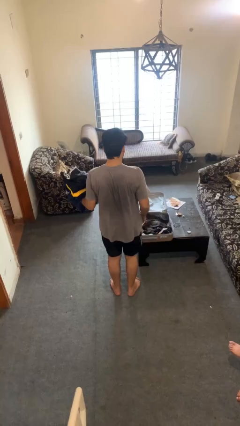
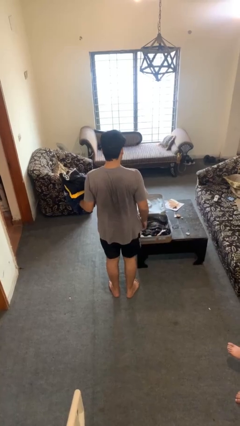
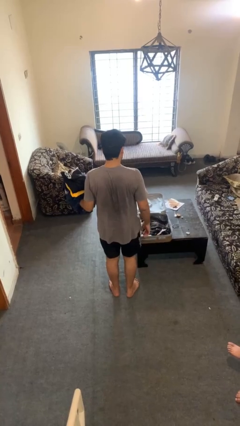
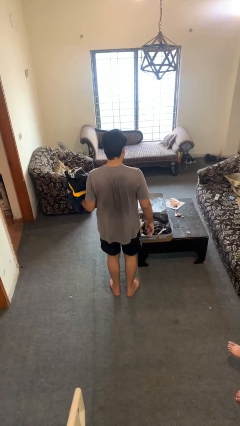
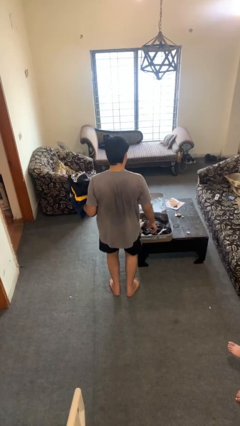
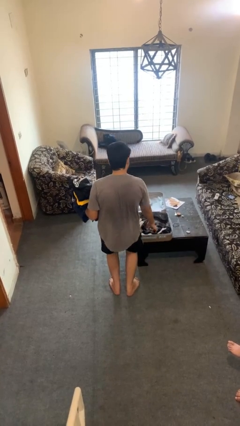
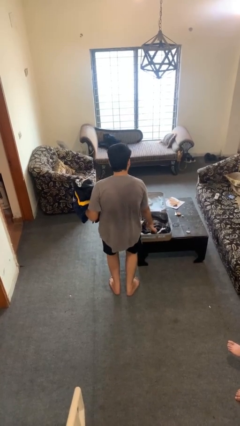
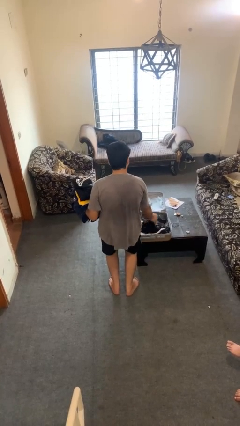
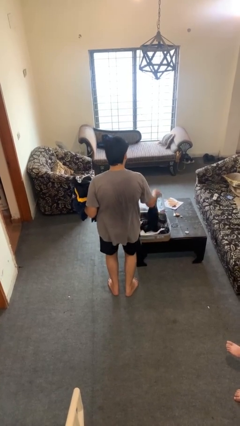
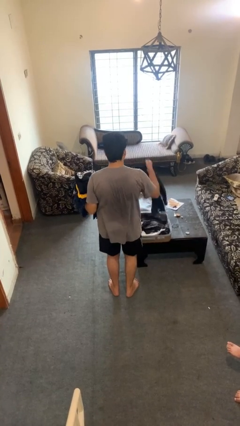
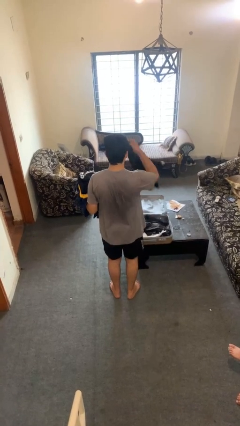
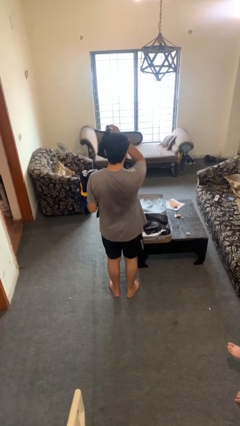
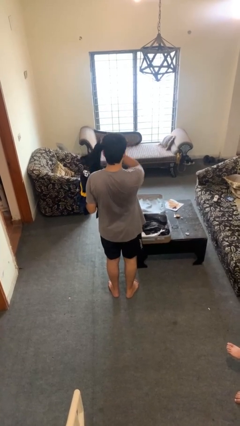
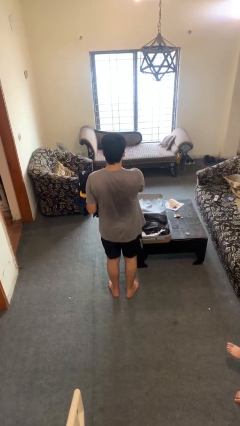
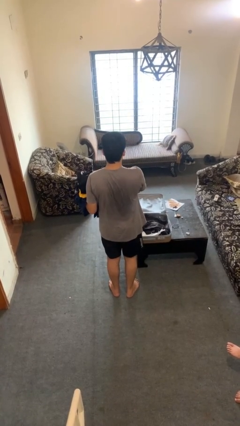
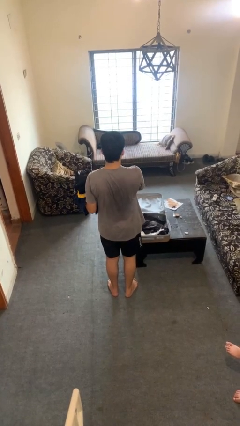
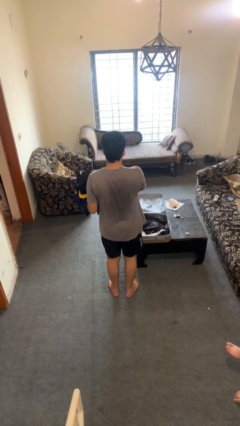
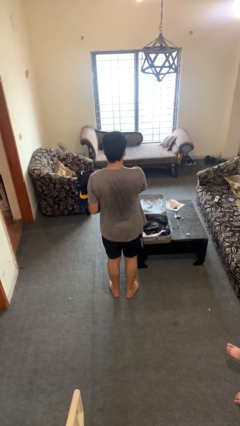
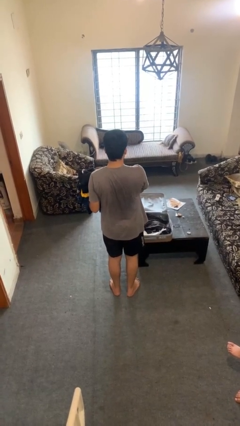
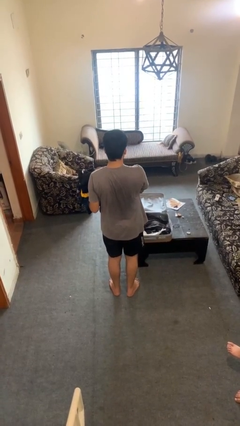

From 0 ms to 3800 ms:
person unloads clothes from suitcase

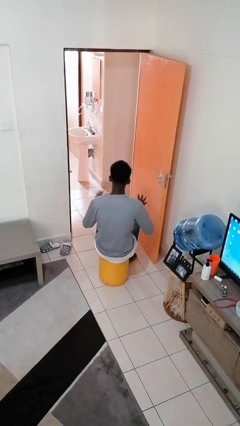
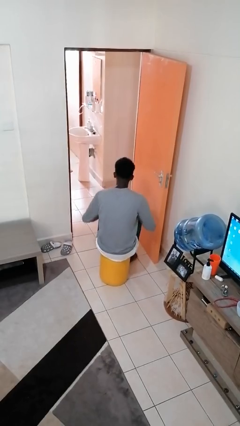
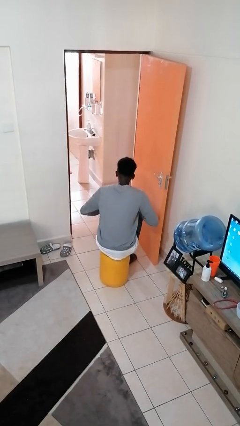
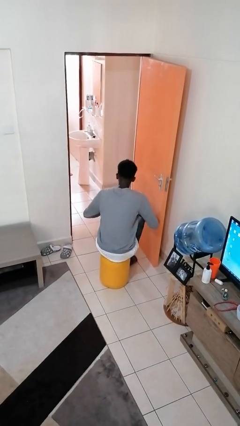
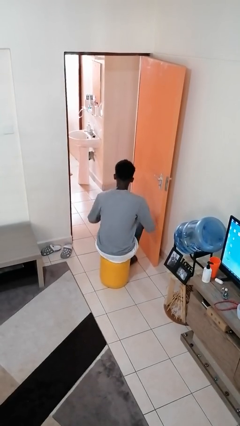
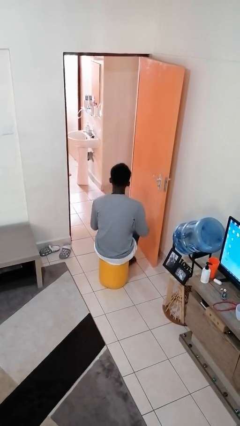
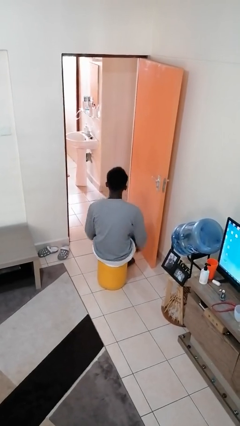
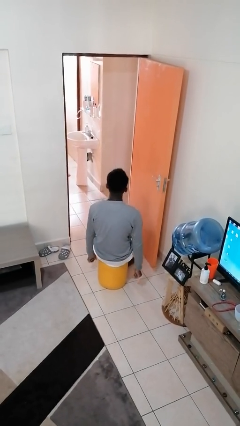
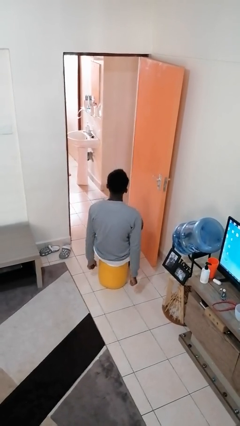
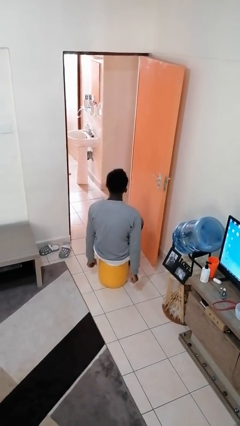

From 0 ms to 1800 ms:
person slaps hands on thighs

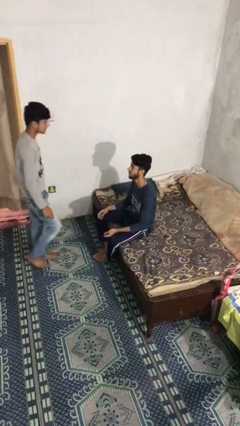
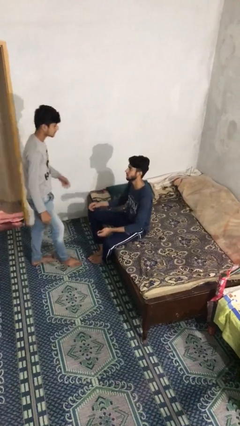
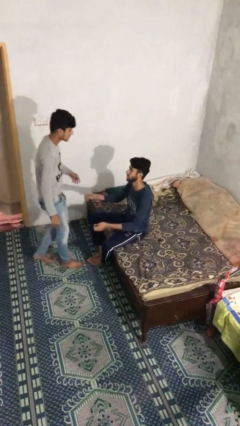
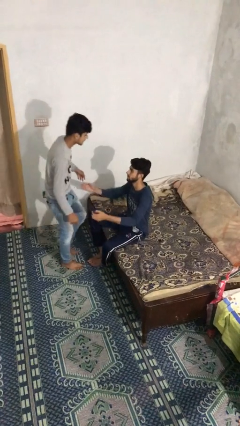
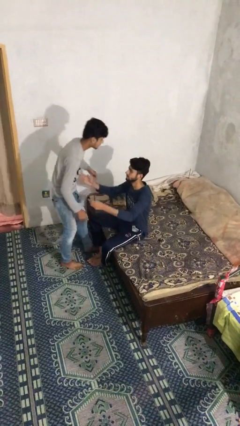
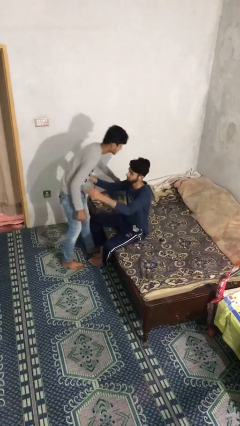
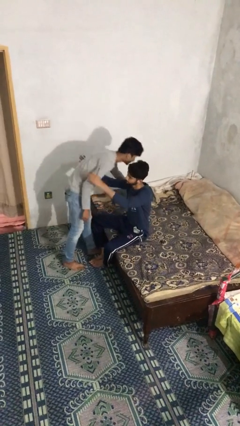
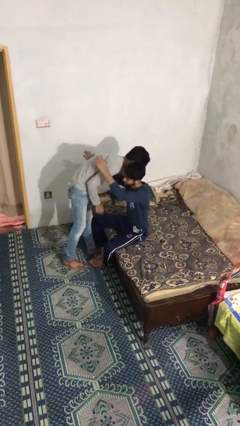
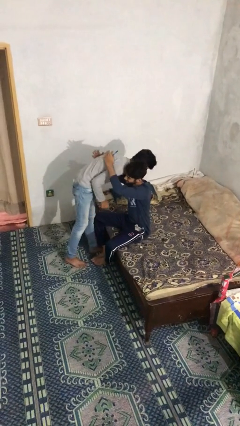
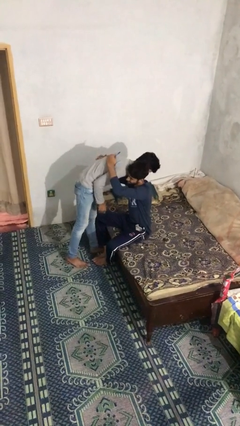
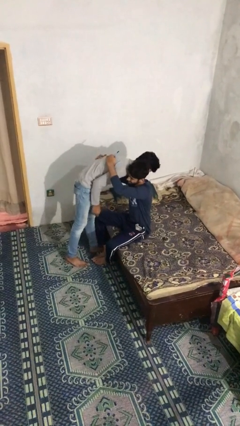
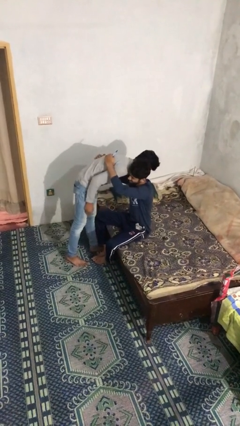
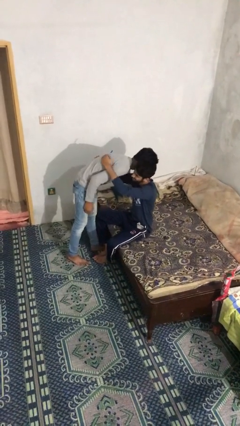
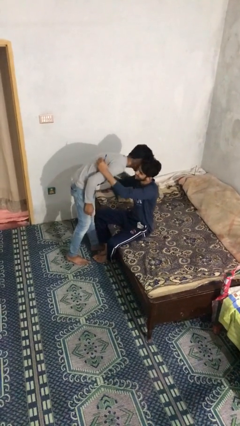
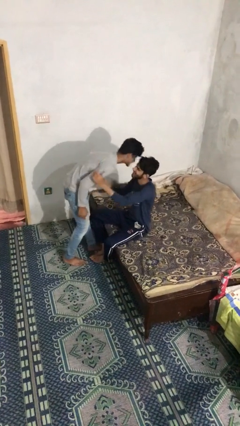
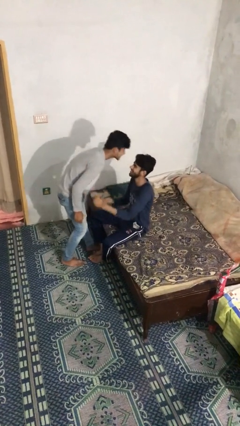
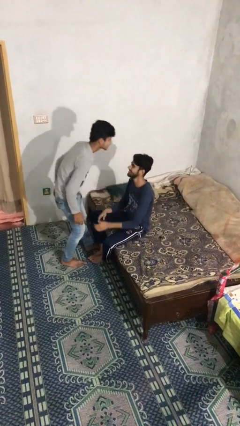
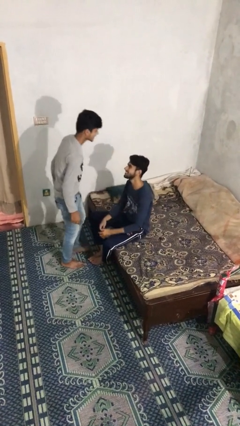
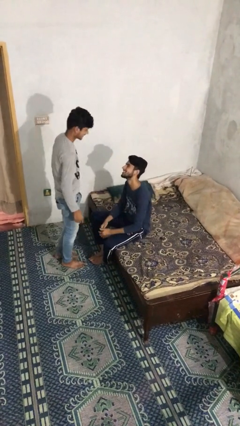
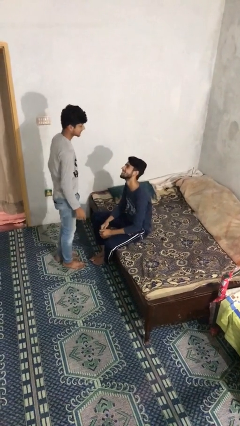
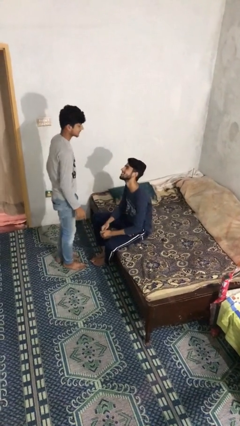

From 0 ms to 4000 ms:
person embraces person

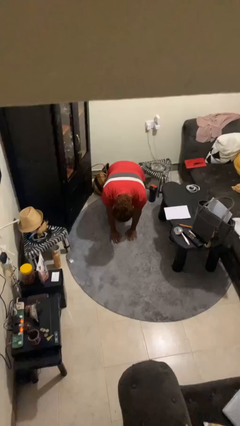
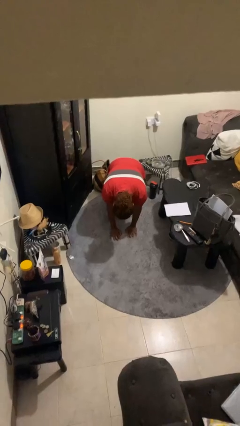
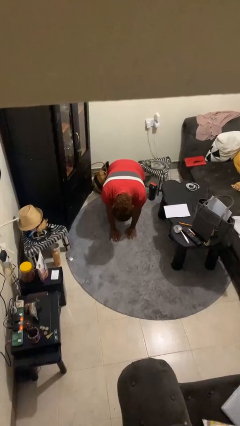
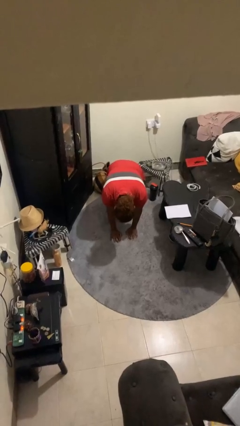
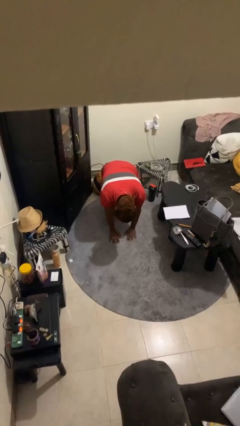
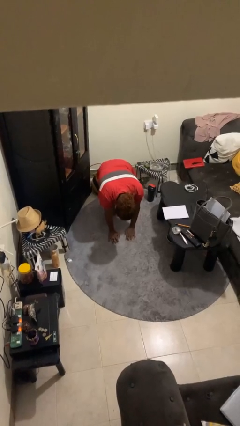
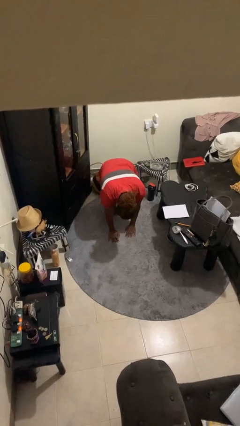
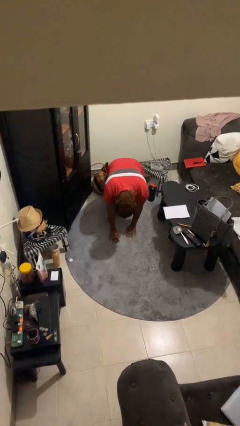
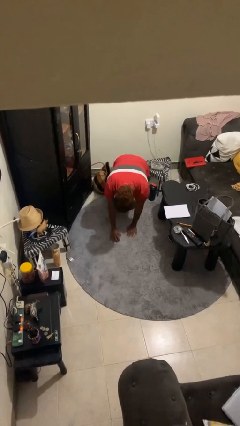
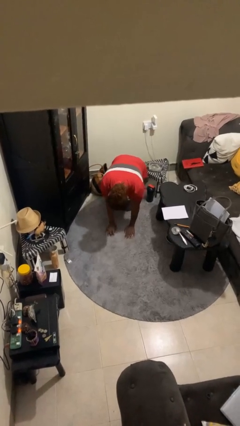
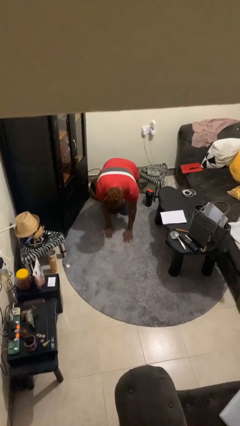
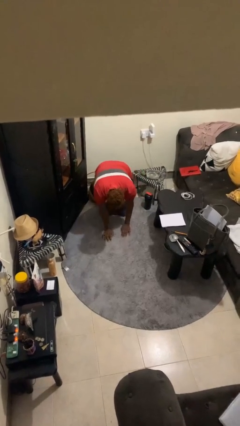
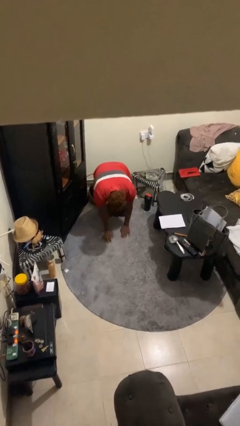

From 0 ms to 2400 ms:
person crawls

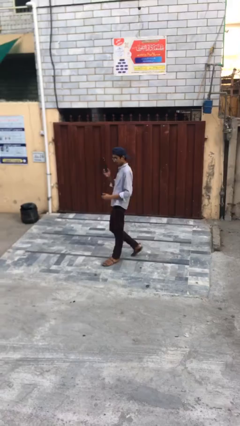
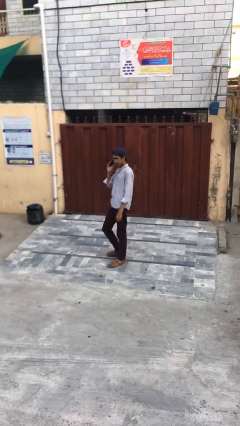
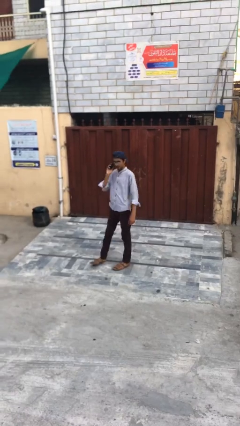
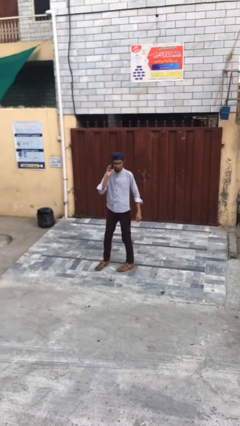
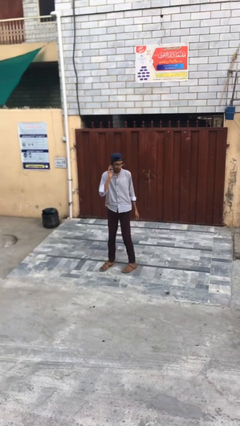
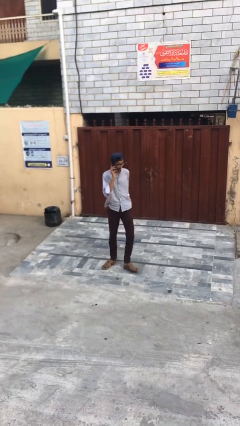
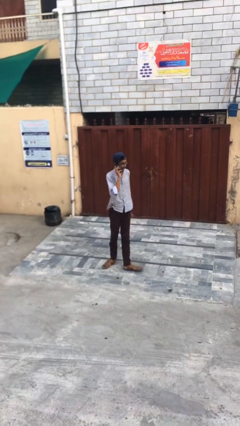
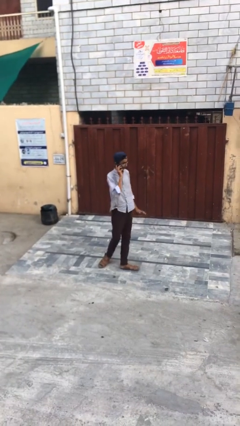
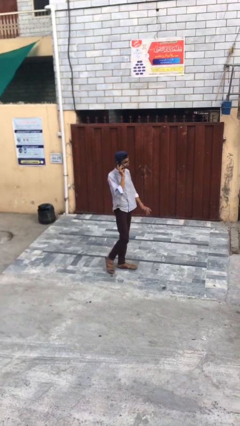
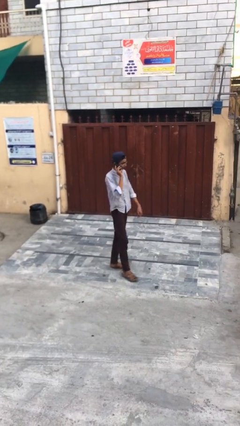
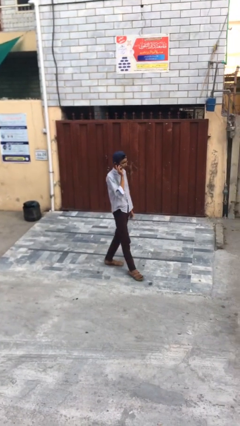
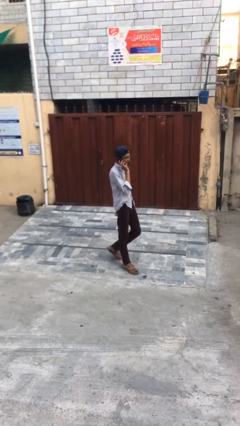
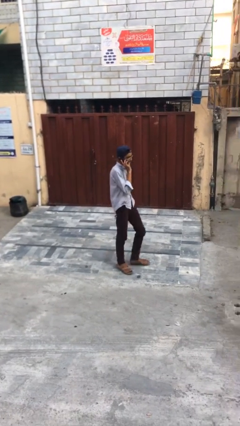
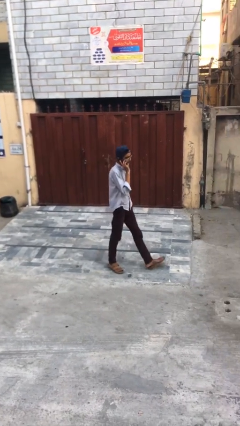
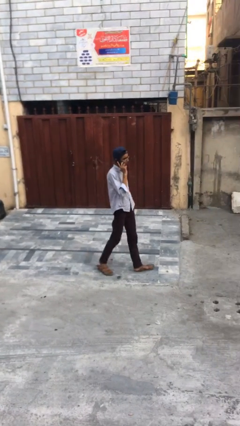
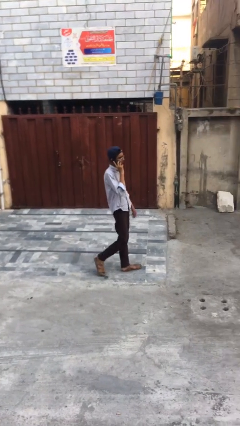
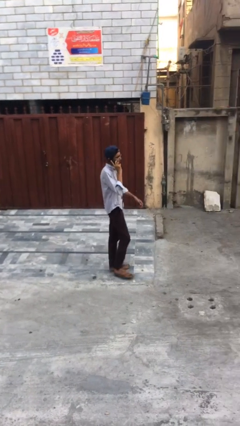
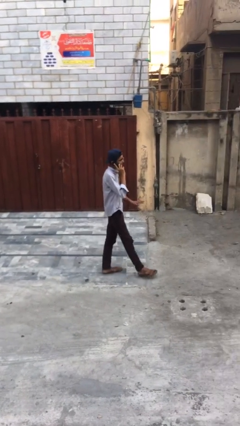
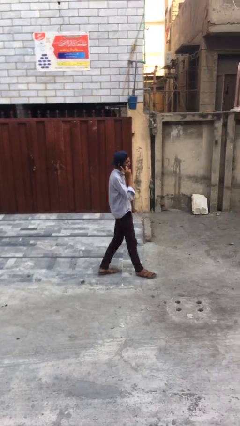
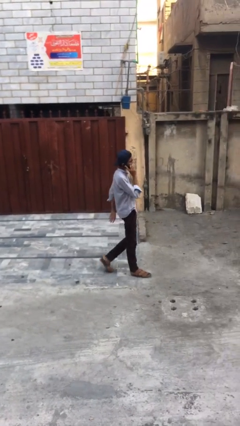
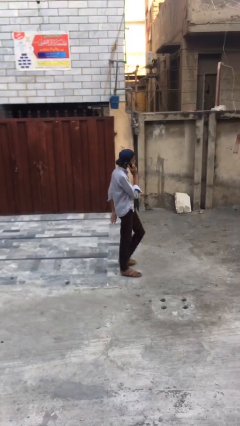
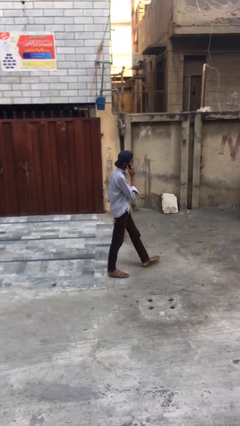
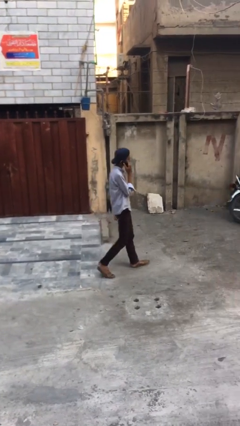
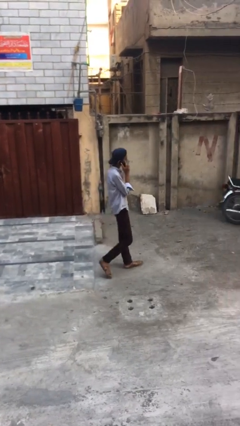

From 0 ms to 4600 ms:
person talks on phone

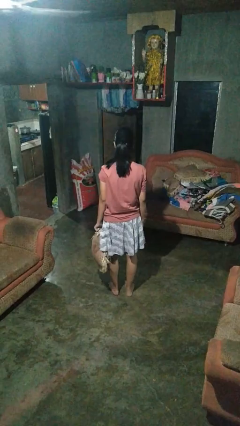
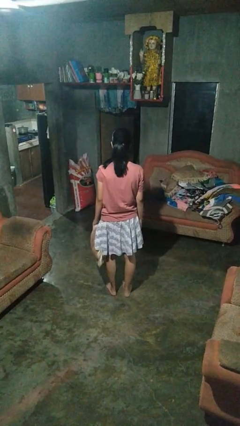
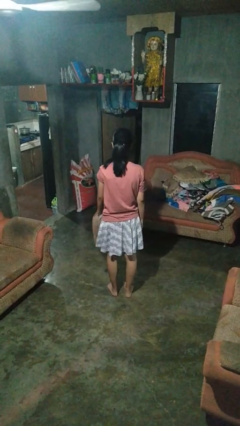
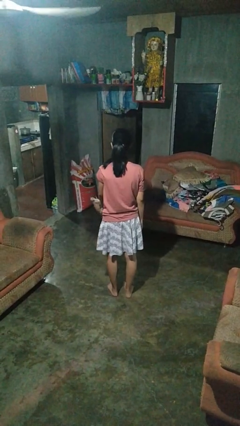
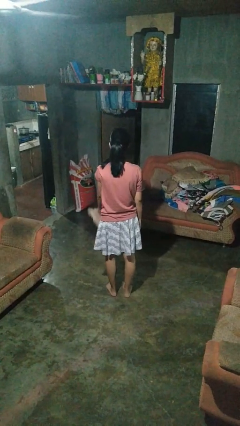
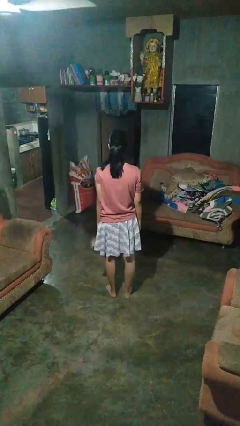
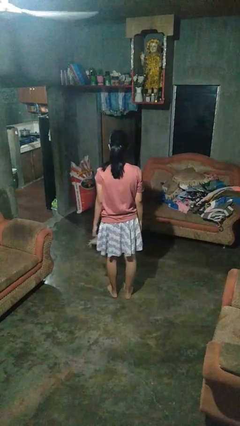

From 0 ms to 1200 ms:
person throws object to ground
